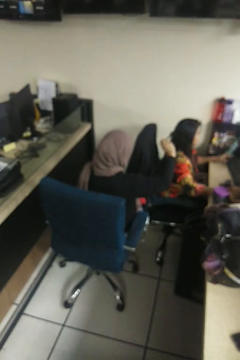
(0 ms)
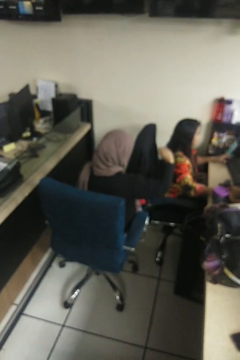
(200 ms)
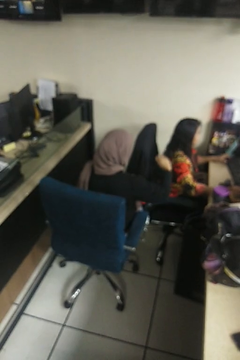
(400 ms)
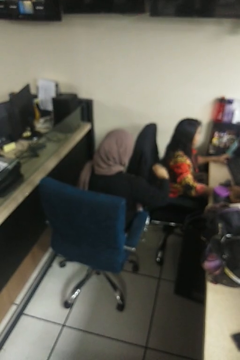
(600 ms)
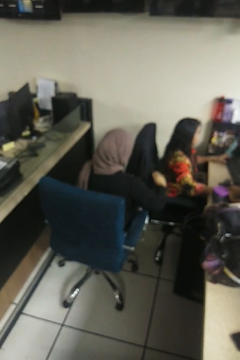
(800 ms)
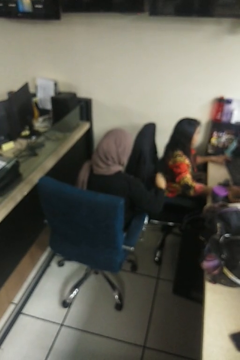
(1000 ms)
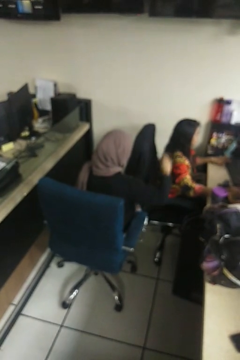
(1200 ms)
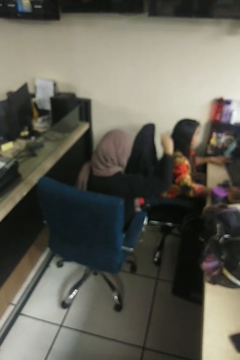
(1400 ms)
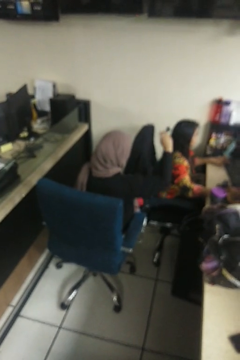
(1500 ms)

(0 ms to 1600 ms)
person brushes hair of person

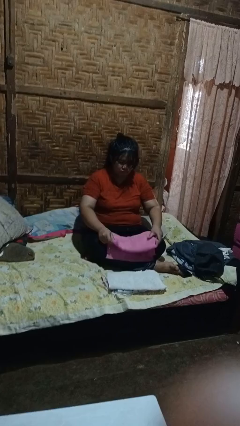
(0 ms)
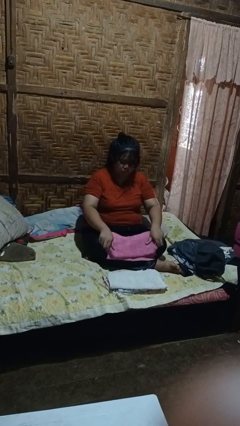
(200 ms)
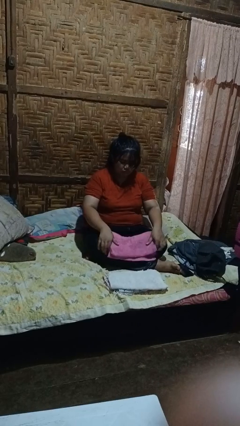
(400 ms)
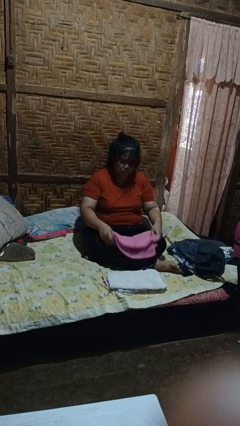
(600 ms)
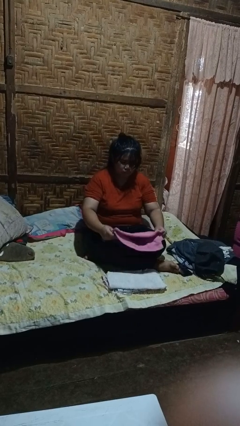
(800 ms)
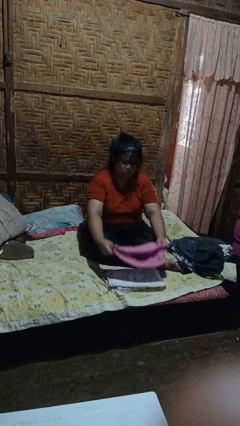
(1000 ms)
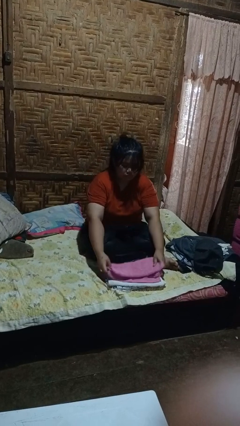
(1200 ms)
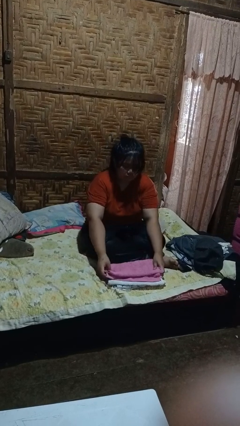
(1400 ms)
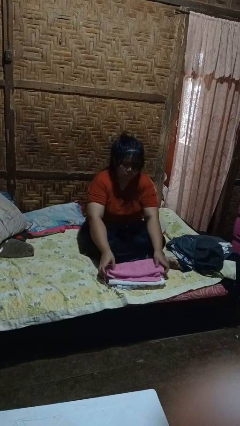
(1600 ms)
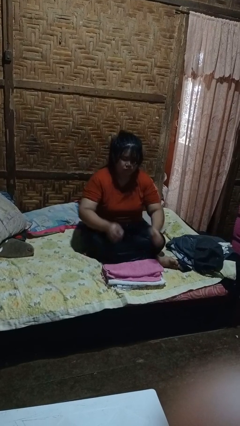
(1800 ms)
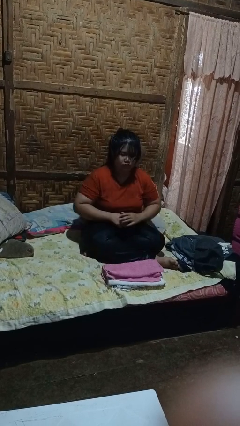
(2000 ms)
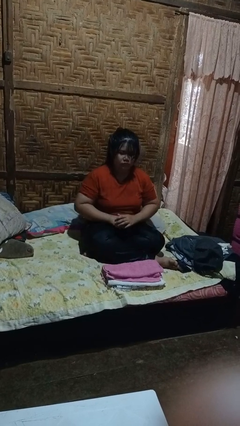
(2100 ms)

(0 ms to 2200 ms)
person folds towel

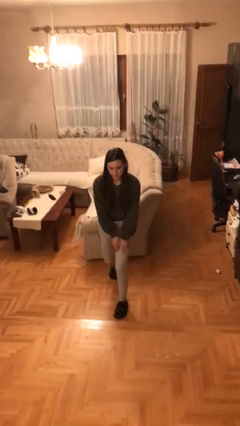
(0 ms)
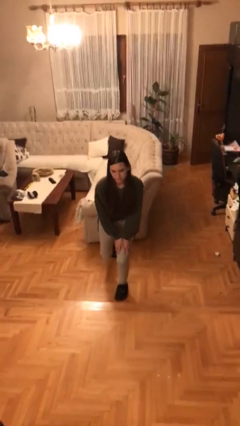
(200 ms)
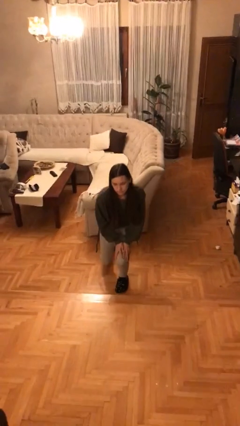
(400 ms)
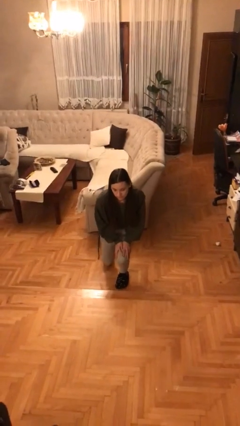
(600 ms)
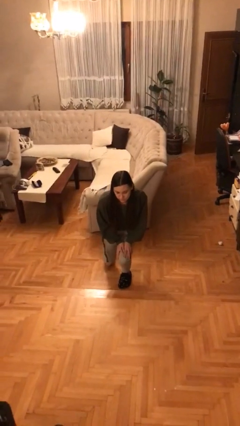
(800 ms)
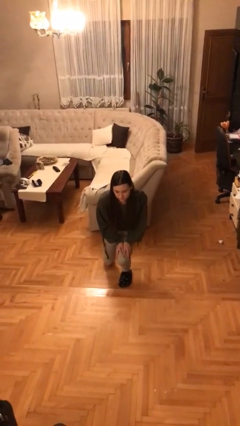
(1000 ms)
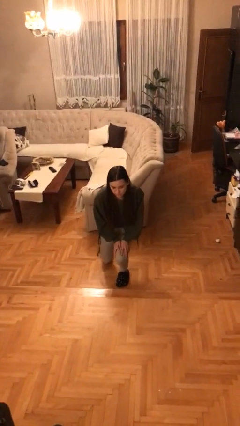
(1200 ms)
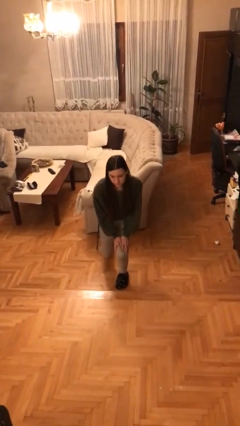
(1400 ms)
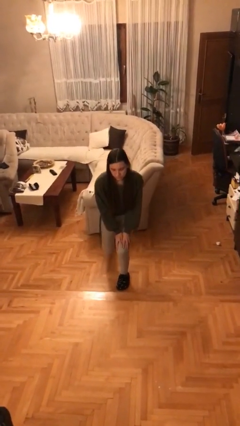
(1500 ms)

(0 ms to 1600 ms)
person kneels

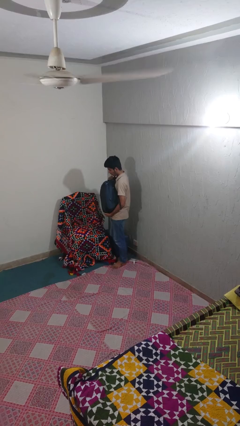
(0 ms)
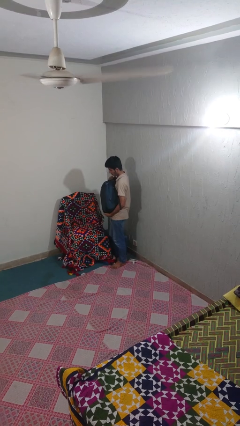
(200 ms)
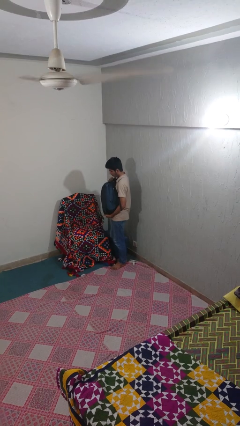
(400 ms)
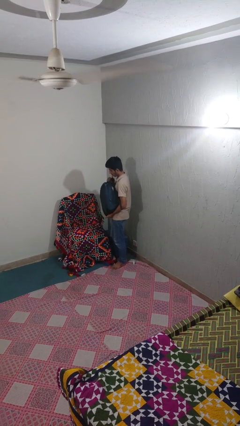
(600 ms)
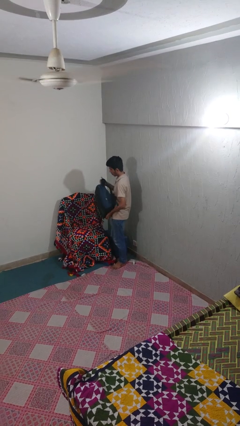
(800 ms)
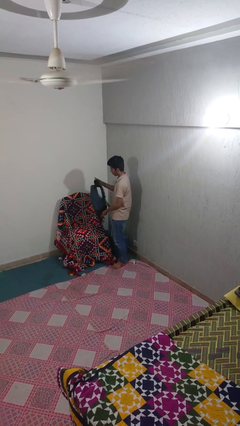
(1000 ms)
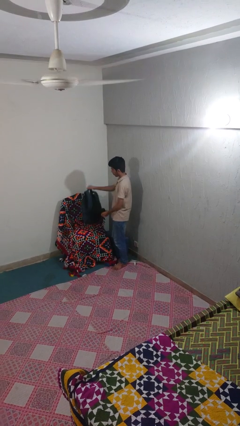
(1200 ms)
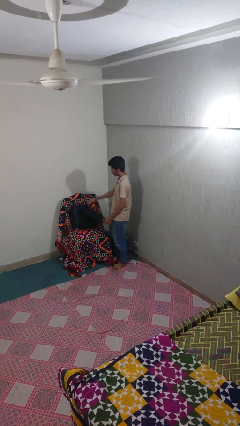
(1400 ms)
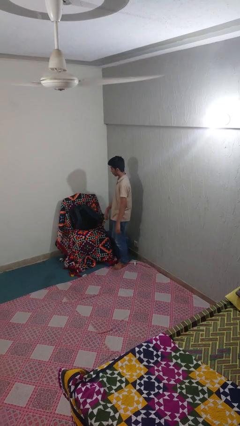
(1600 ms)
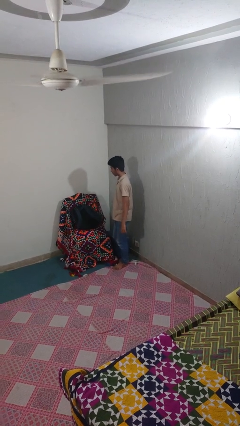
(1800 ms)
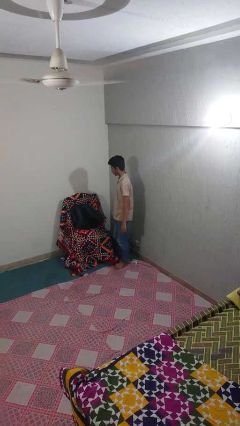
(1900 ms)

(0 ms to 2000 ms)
person puts down object on couch

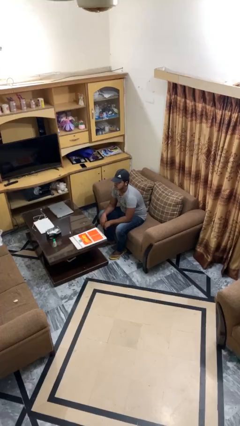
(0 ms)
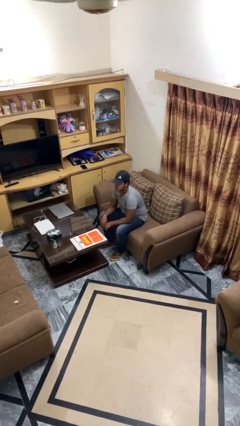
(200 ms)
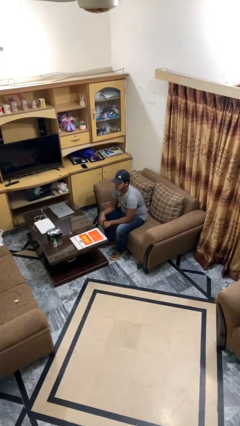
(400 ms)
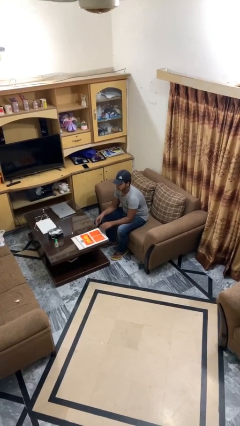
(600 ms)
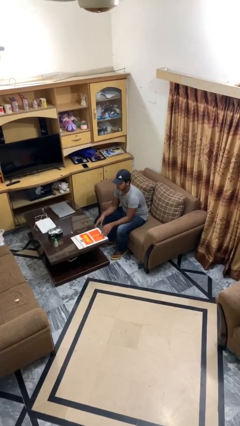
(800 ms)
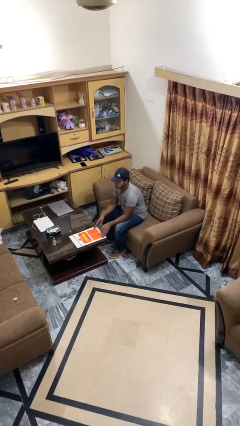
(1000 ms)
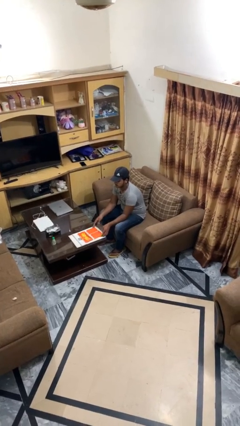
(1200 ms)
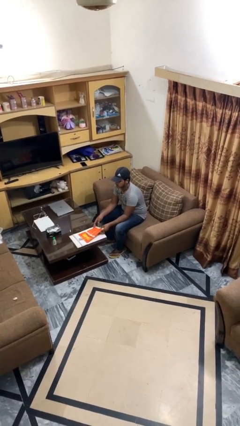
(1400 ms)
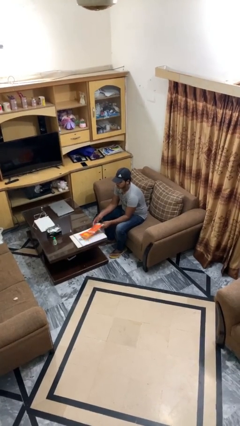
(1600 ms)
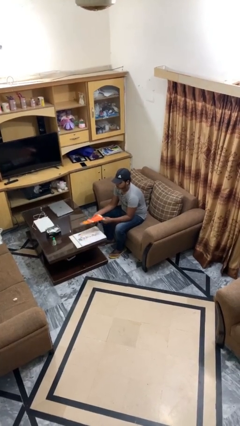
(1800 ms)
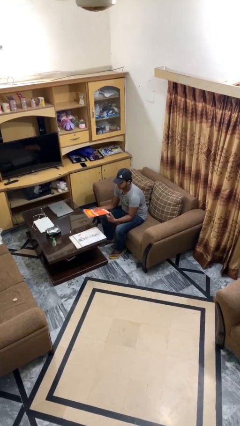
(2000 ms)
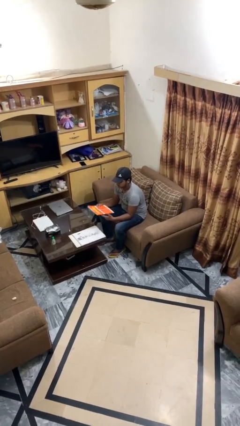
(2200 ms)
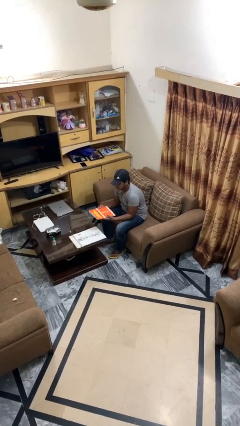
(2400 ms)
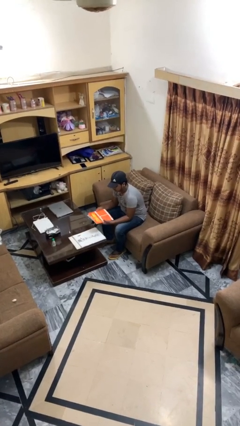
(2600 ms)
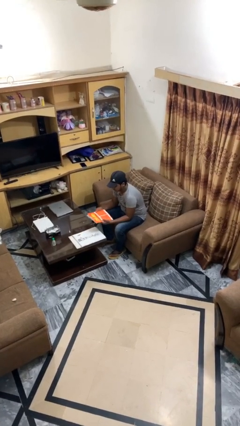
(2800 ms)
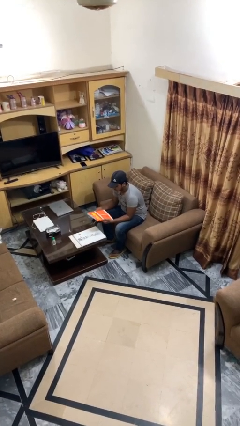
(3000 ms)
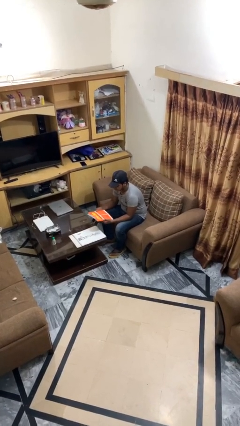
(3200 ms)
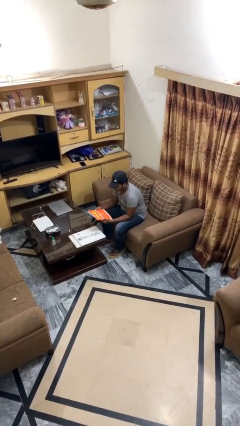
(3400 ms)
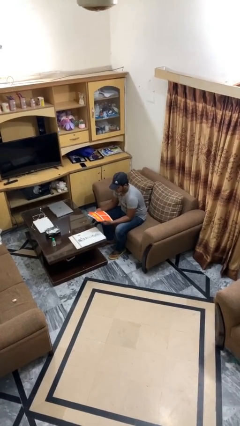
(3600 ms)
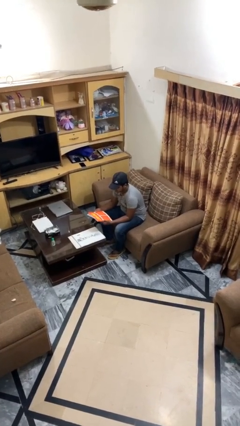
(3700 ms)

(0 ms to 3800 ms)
person picks up object from table

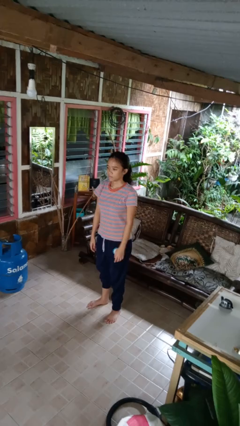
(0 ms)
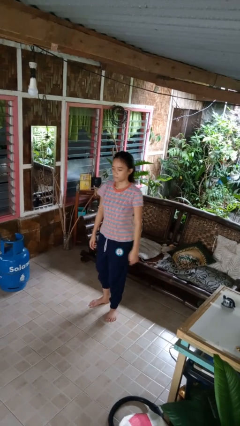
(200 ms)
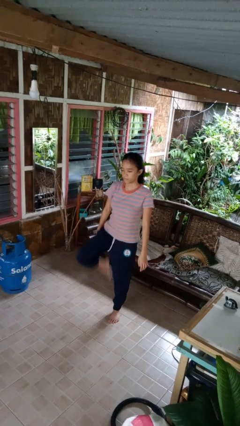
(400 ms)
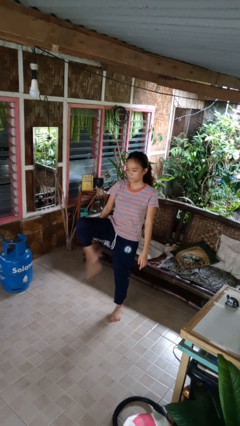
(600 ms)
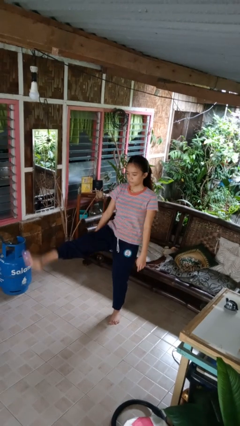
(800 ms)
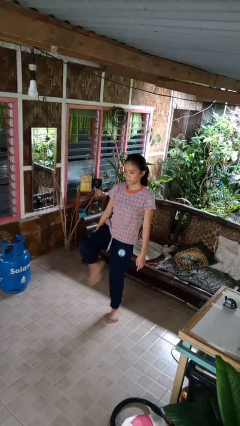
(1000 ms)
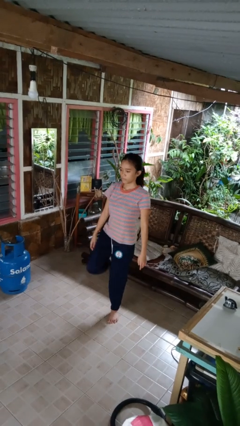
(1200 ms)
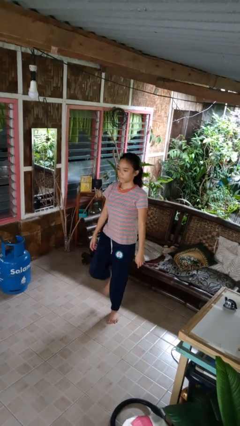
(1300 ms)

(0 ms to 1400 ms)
person karate kicks

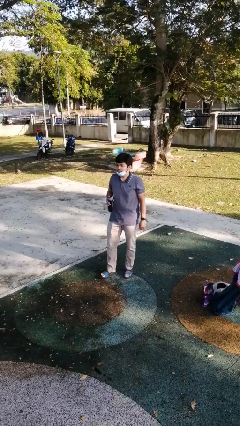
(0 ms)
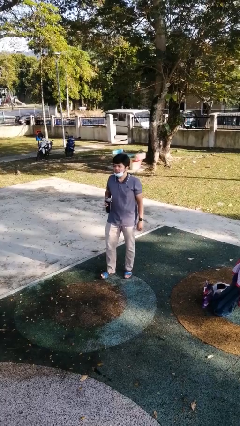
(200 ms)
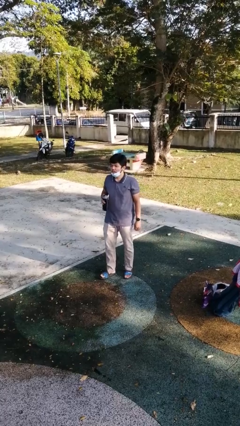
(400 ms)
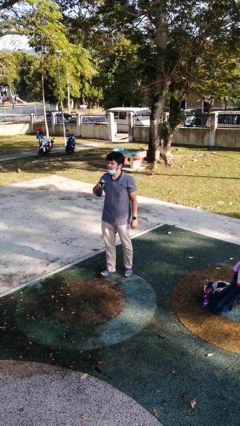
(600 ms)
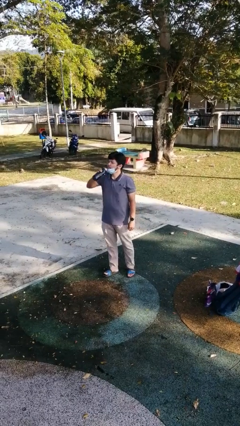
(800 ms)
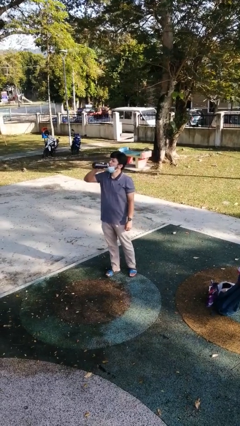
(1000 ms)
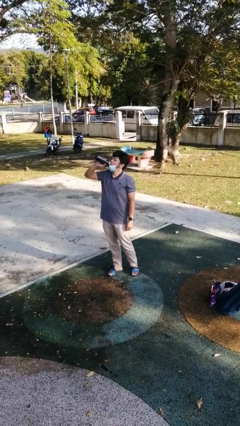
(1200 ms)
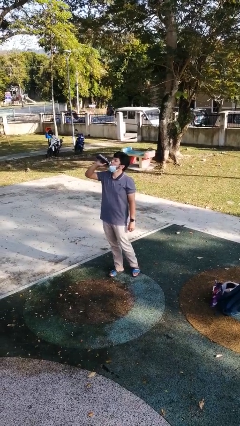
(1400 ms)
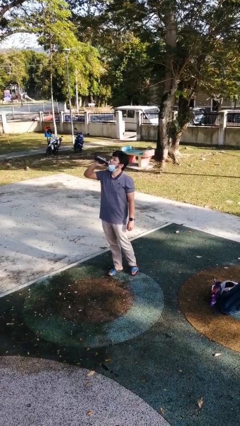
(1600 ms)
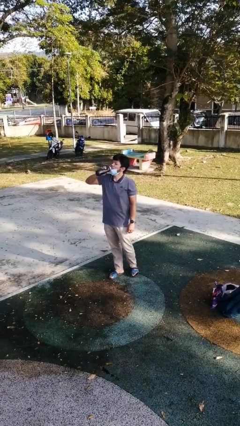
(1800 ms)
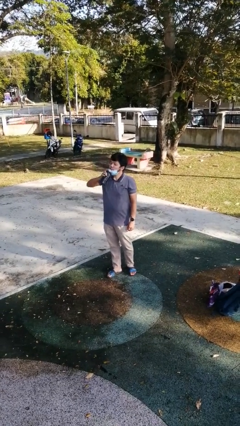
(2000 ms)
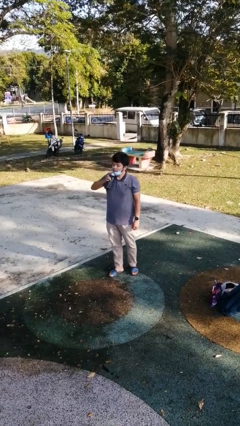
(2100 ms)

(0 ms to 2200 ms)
person drinks from bottle

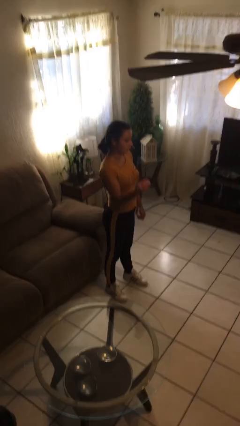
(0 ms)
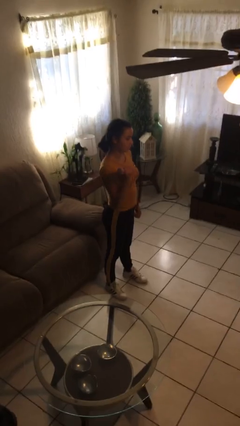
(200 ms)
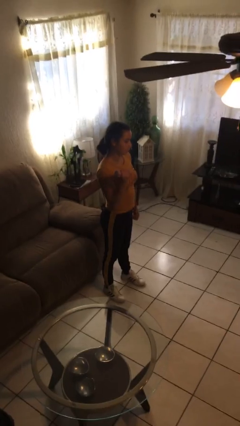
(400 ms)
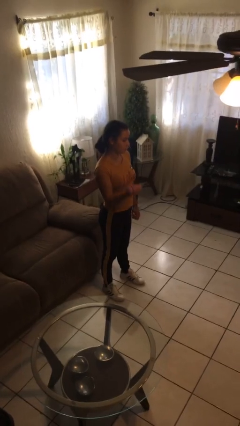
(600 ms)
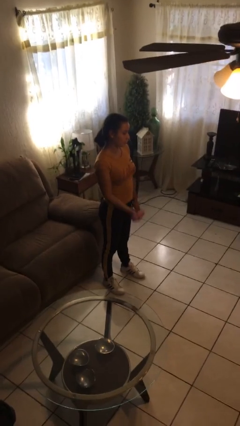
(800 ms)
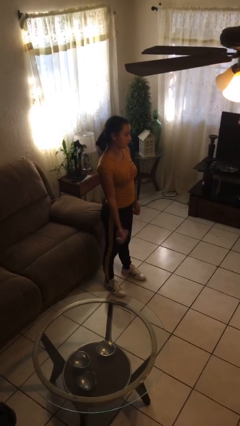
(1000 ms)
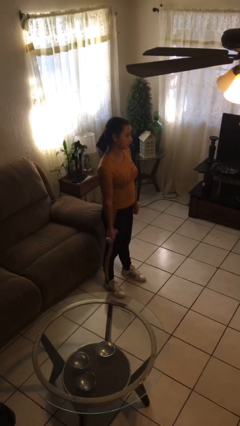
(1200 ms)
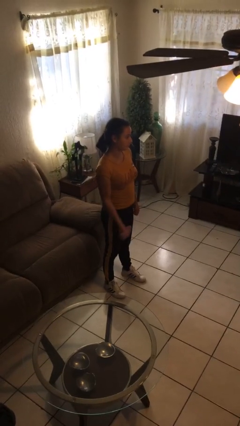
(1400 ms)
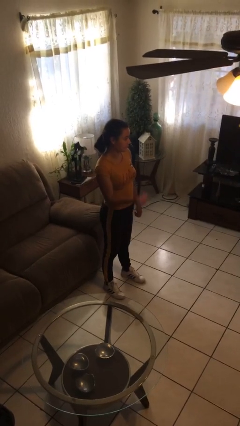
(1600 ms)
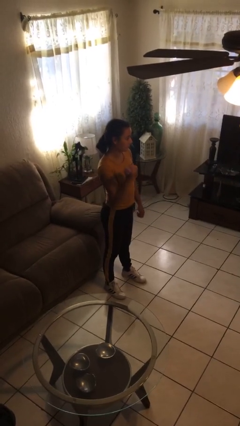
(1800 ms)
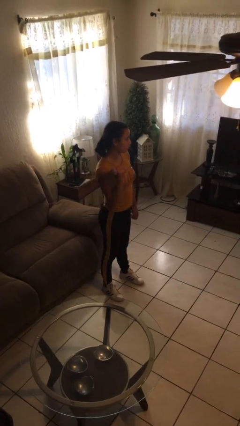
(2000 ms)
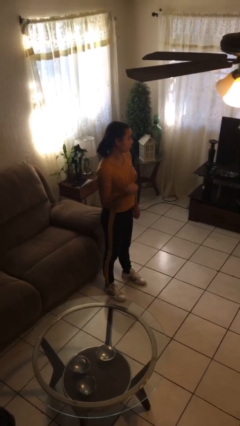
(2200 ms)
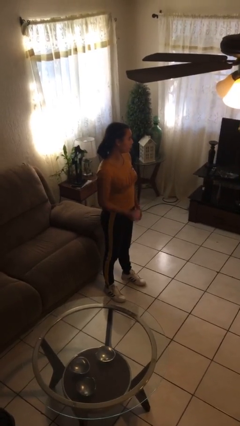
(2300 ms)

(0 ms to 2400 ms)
person lifts dumbbells

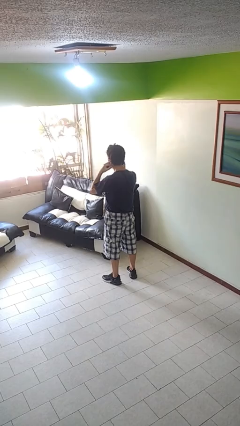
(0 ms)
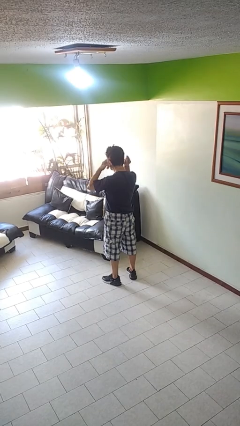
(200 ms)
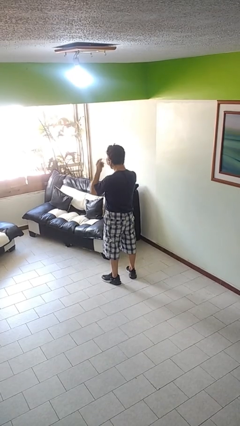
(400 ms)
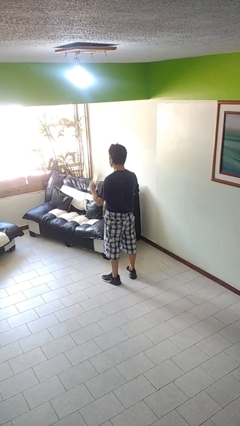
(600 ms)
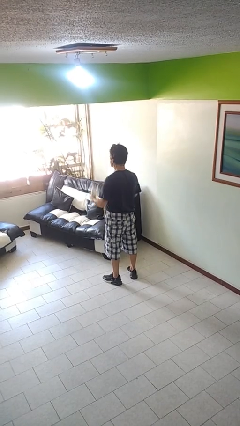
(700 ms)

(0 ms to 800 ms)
person takes off facemask
